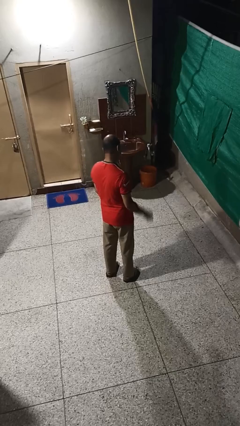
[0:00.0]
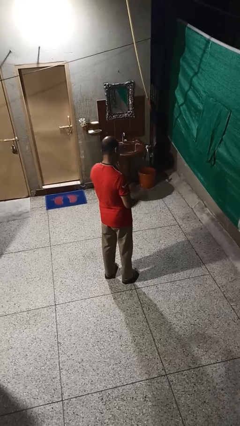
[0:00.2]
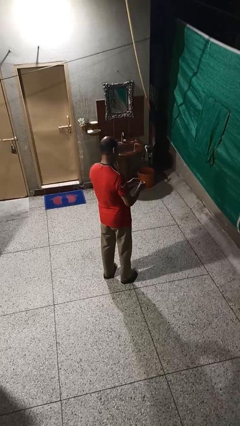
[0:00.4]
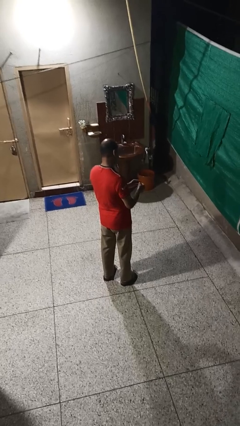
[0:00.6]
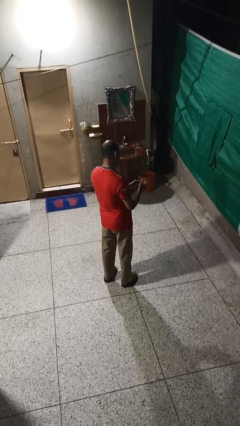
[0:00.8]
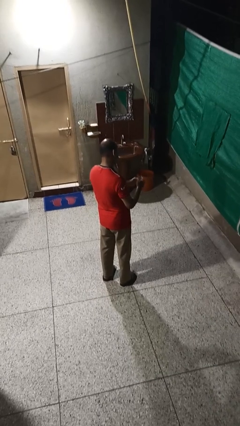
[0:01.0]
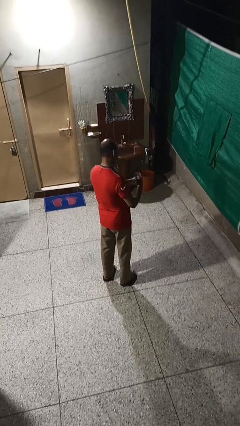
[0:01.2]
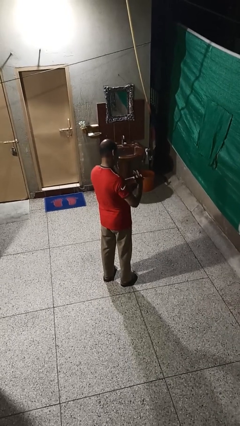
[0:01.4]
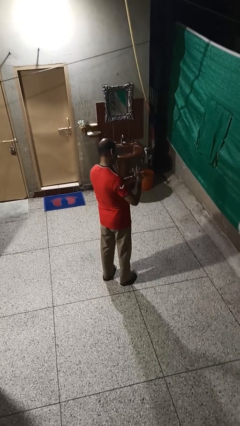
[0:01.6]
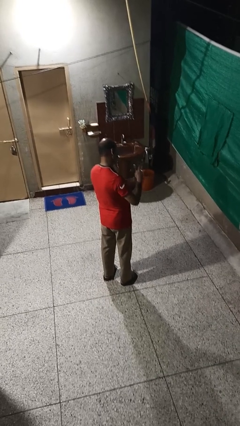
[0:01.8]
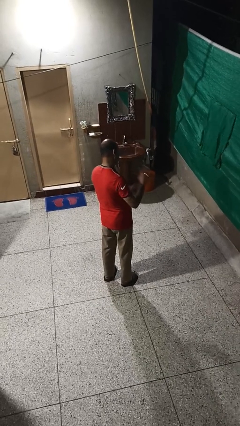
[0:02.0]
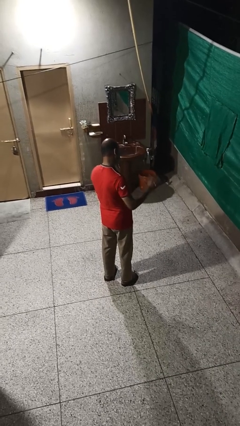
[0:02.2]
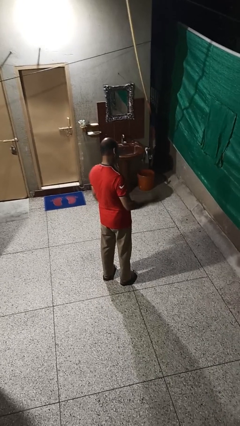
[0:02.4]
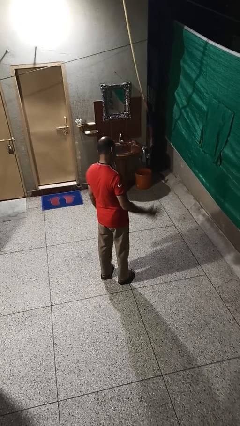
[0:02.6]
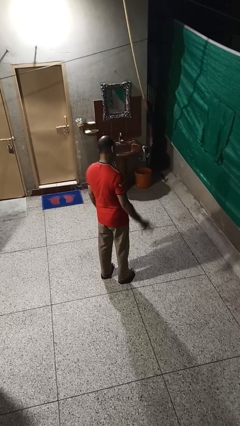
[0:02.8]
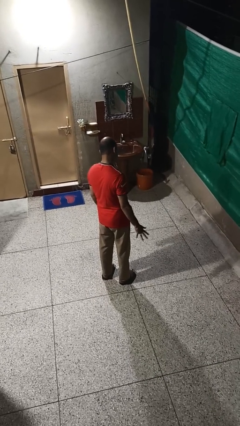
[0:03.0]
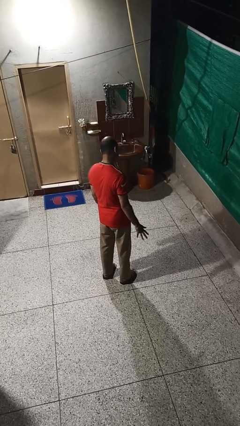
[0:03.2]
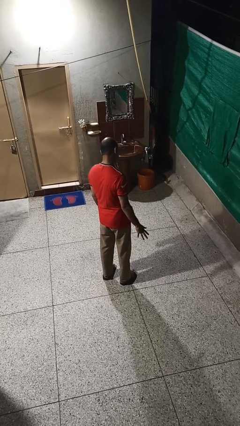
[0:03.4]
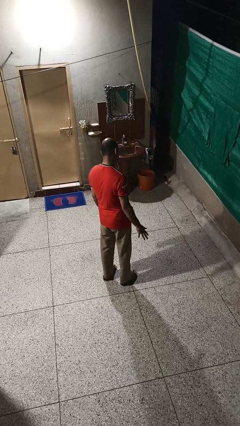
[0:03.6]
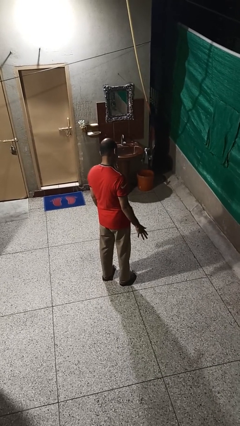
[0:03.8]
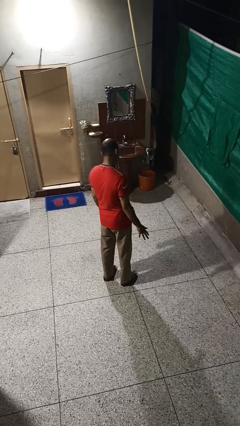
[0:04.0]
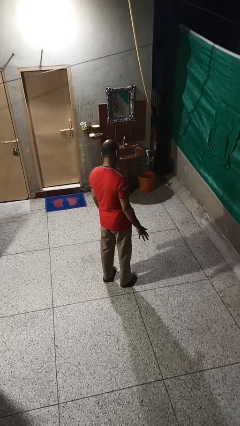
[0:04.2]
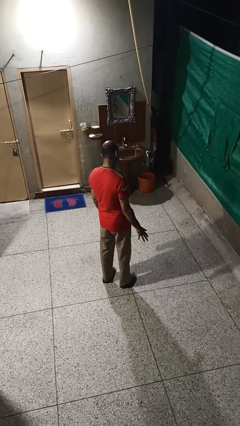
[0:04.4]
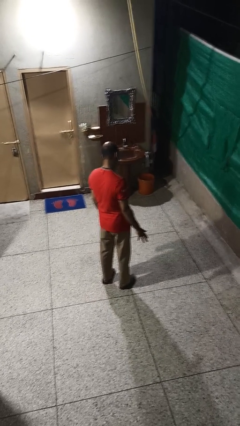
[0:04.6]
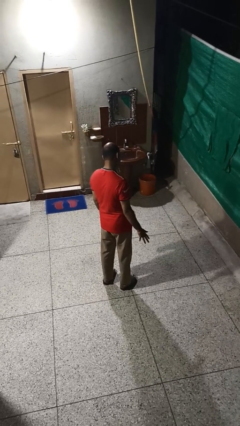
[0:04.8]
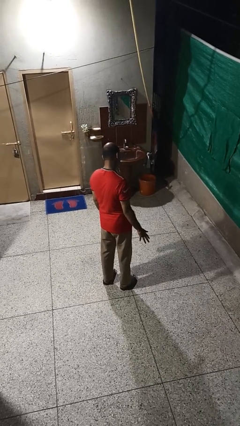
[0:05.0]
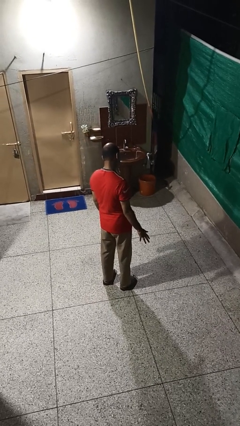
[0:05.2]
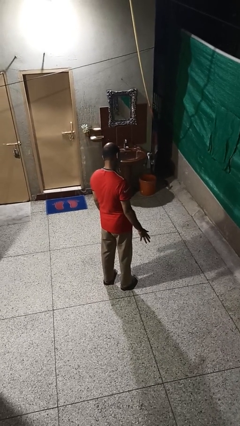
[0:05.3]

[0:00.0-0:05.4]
person puts on ring

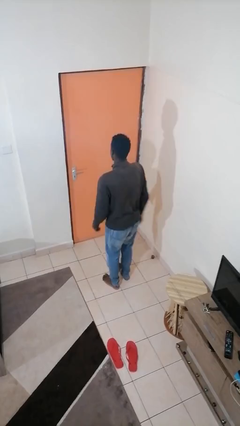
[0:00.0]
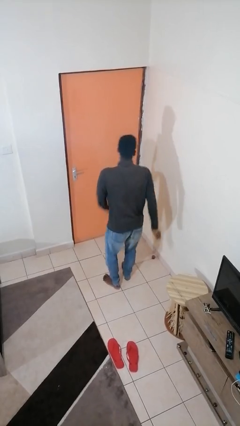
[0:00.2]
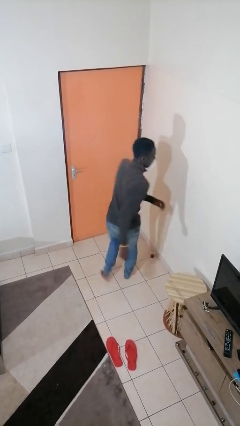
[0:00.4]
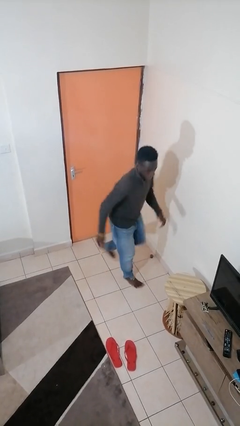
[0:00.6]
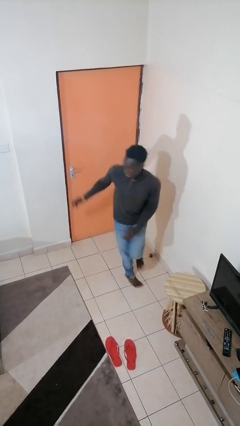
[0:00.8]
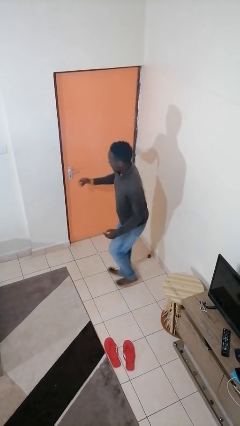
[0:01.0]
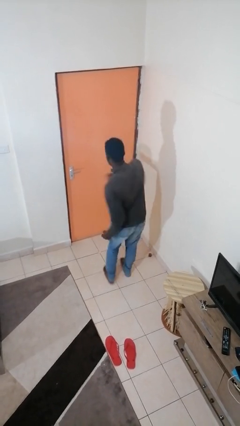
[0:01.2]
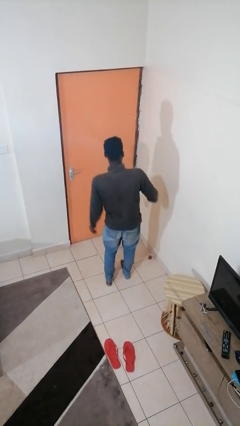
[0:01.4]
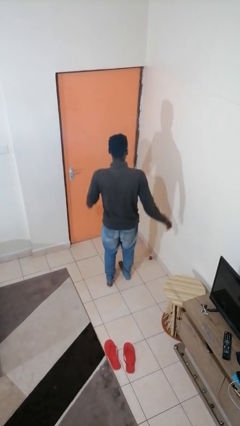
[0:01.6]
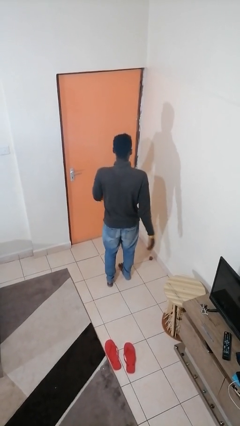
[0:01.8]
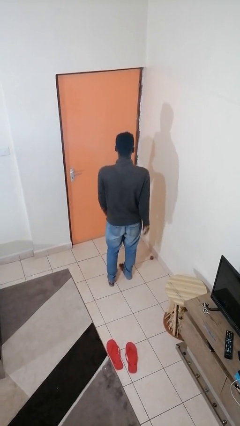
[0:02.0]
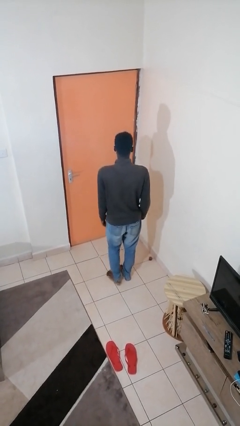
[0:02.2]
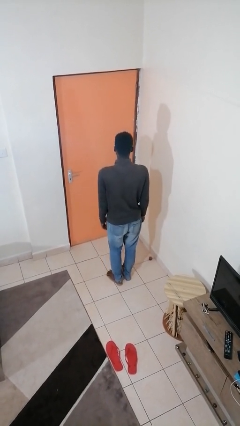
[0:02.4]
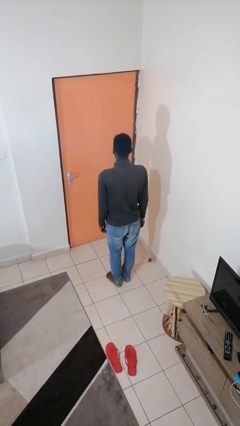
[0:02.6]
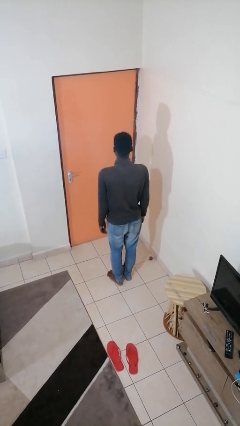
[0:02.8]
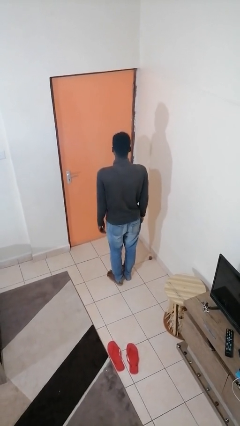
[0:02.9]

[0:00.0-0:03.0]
person twirls

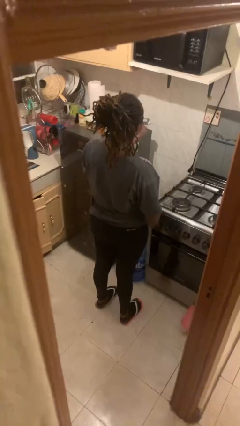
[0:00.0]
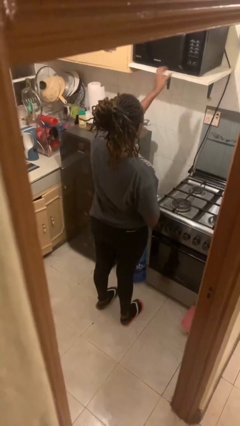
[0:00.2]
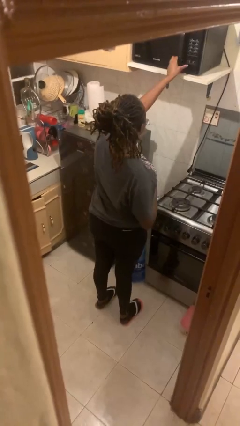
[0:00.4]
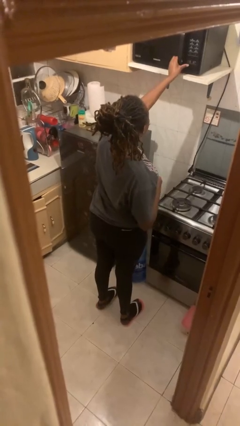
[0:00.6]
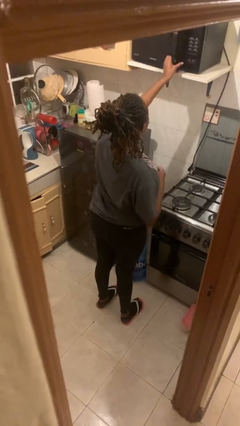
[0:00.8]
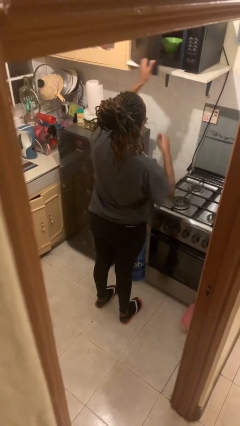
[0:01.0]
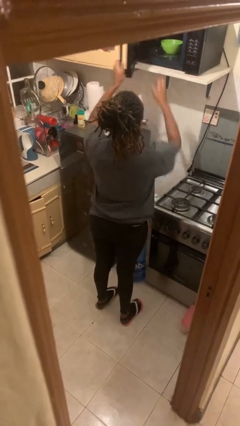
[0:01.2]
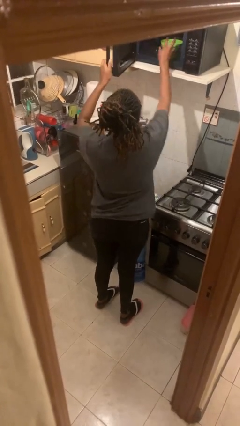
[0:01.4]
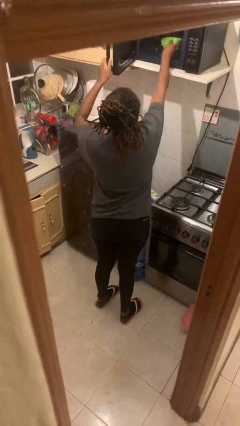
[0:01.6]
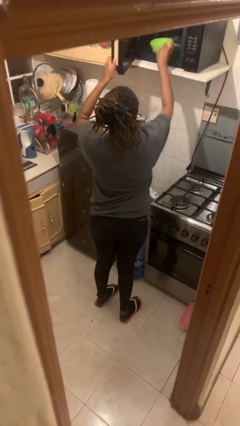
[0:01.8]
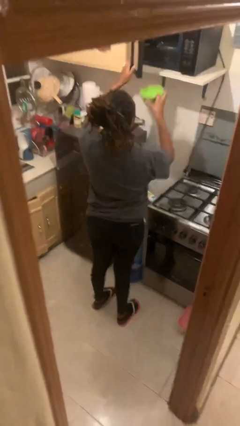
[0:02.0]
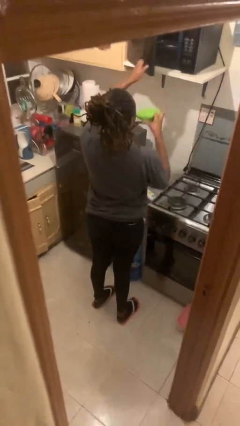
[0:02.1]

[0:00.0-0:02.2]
person takes object from microwave

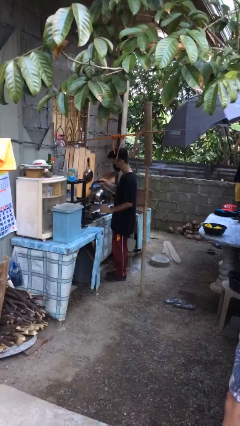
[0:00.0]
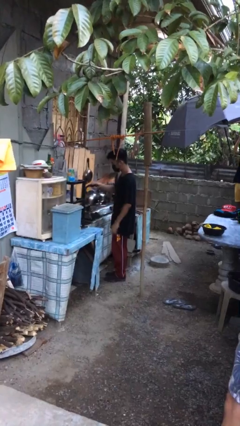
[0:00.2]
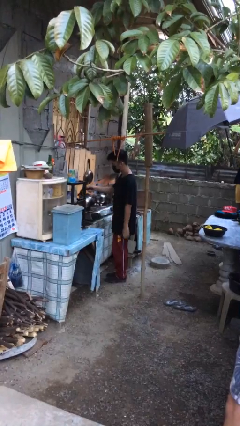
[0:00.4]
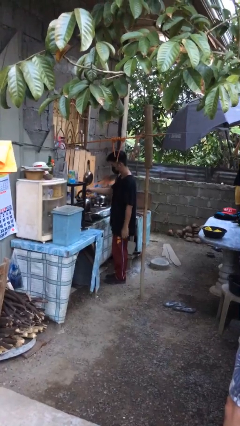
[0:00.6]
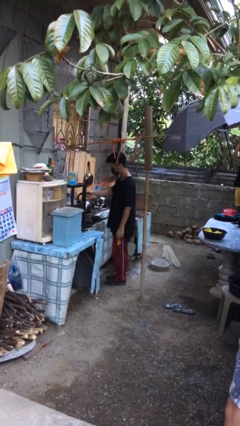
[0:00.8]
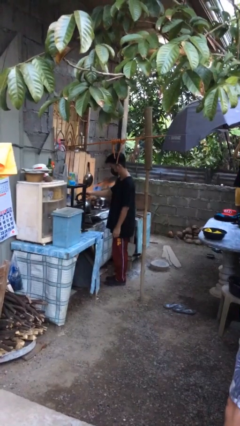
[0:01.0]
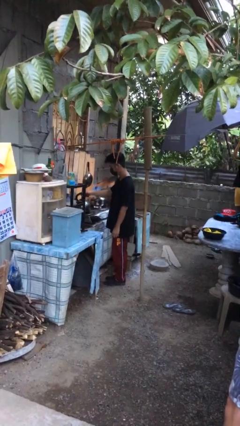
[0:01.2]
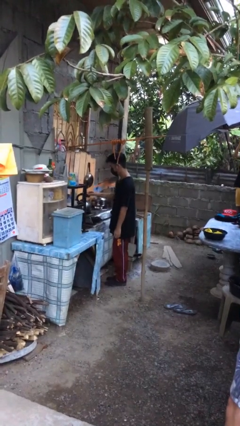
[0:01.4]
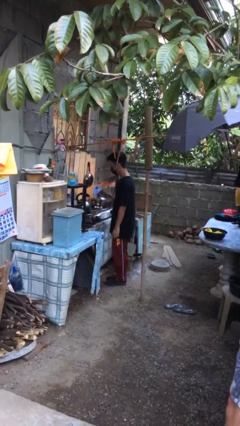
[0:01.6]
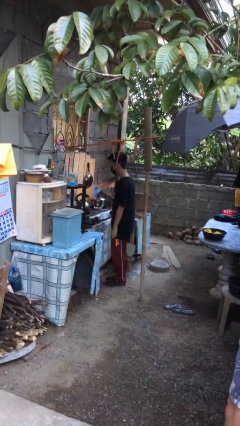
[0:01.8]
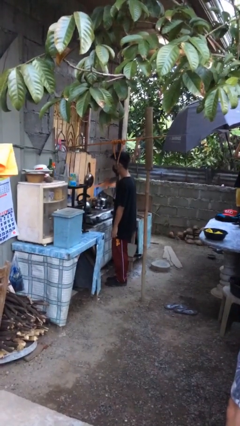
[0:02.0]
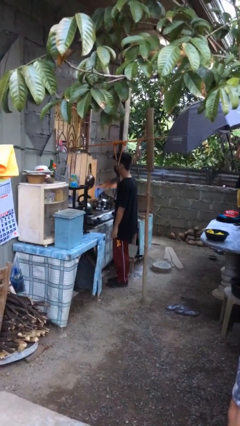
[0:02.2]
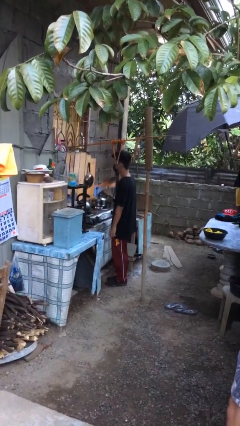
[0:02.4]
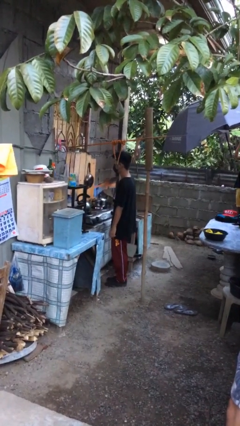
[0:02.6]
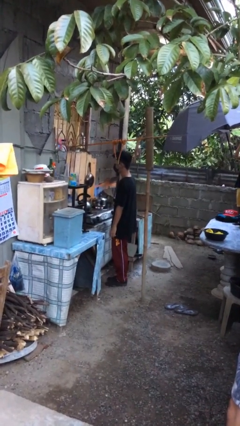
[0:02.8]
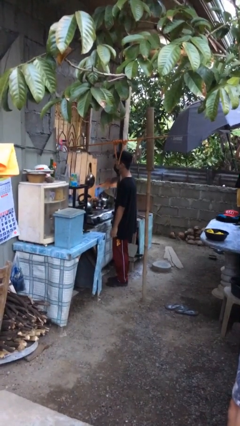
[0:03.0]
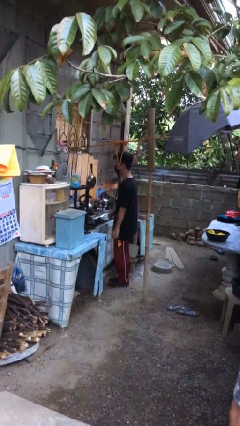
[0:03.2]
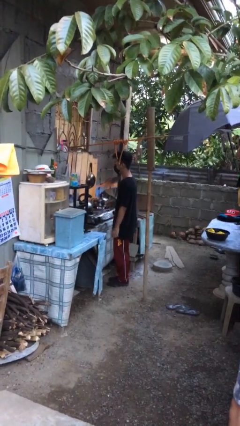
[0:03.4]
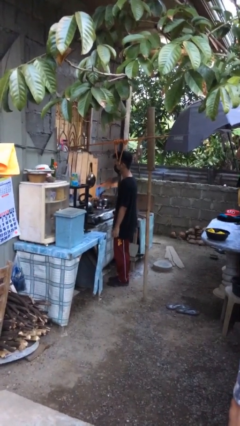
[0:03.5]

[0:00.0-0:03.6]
person puts down object on countertop

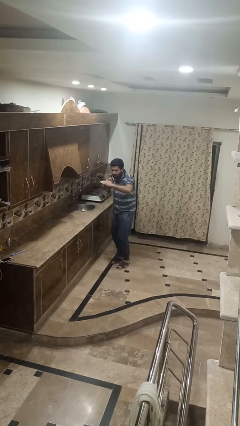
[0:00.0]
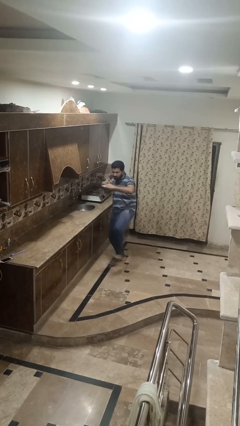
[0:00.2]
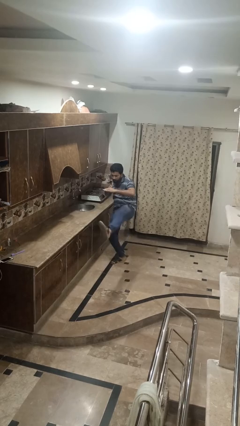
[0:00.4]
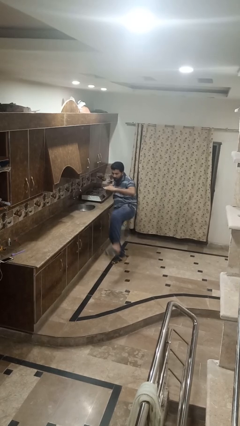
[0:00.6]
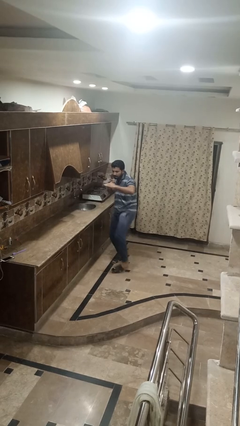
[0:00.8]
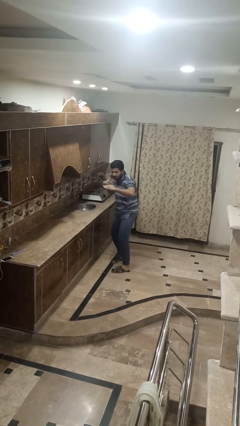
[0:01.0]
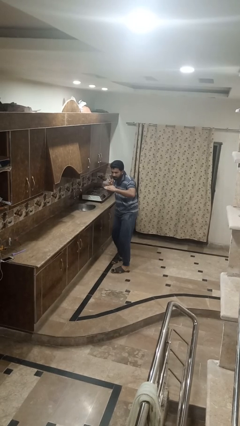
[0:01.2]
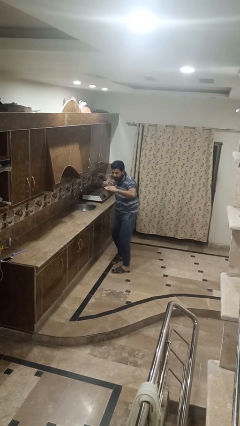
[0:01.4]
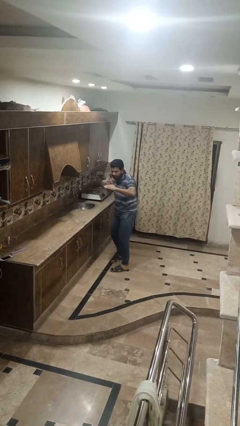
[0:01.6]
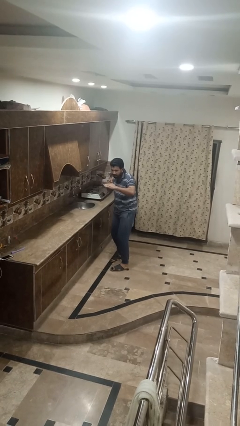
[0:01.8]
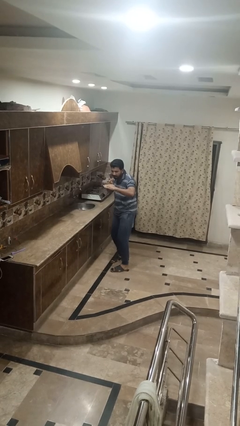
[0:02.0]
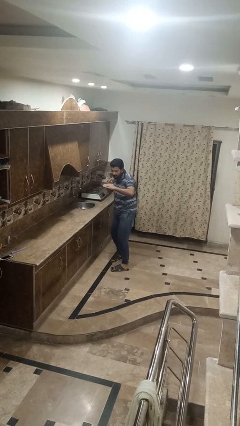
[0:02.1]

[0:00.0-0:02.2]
person karate kicks

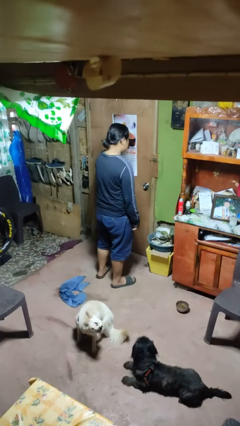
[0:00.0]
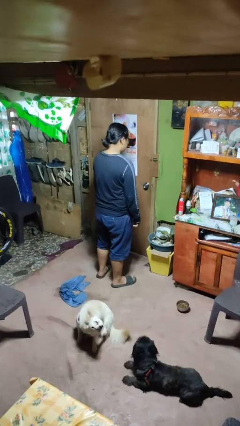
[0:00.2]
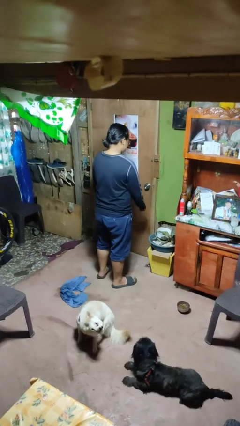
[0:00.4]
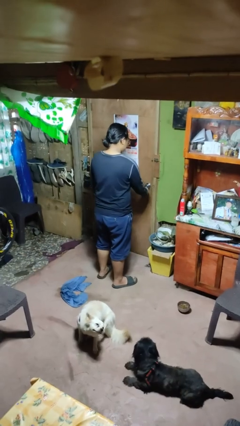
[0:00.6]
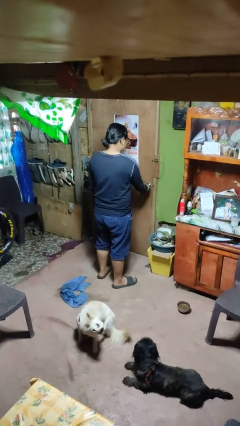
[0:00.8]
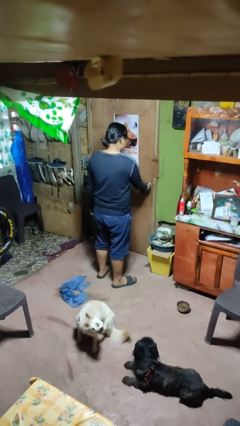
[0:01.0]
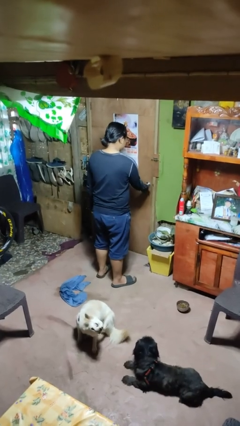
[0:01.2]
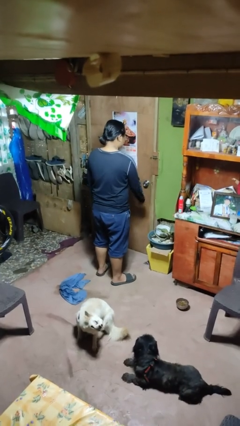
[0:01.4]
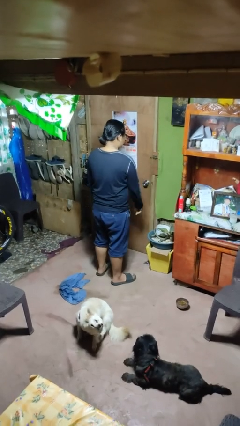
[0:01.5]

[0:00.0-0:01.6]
person locks door with keys
